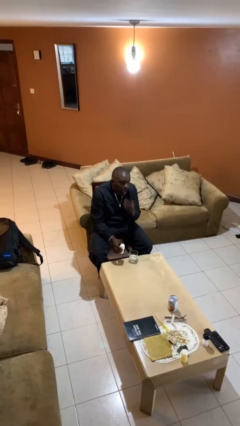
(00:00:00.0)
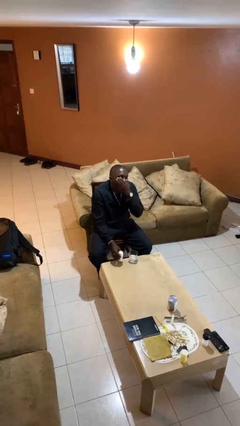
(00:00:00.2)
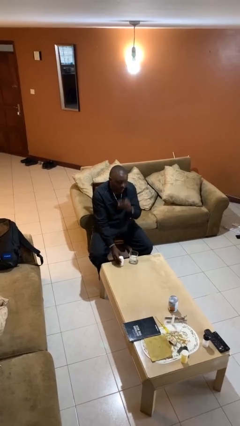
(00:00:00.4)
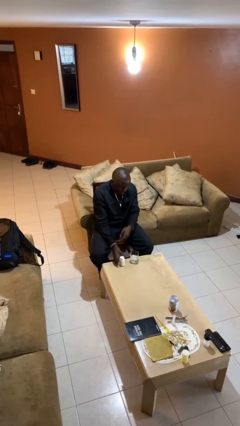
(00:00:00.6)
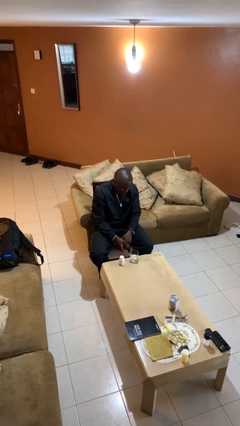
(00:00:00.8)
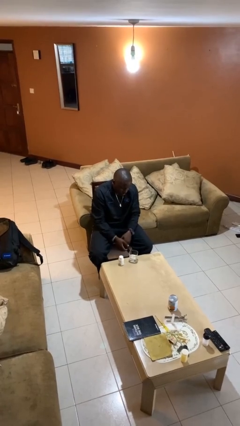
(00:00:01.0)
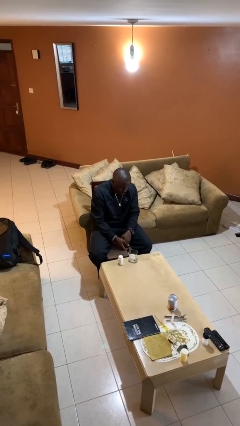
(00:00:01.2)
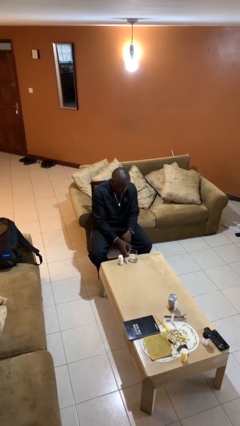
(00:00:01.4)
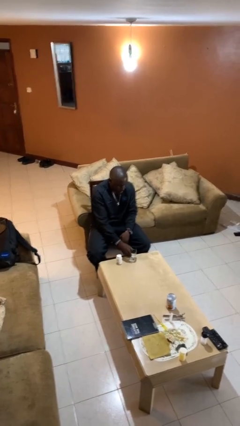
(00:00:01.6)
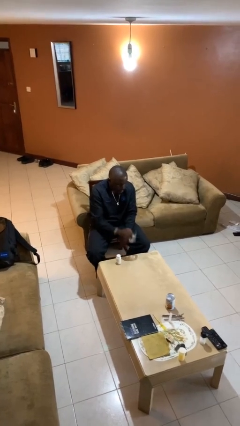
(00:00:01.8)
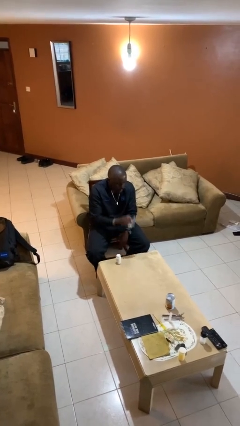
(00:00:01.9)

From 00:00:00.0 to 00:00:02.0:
person takes medicine pills

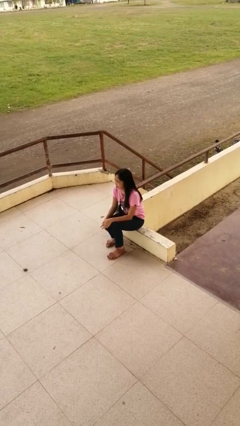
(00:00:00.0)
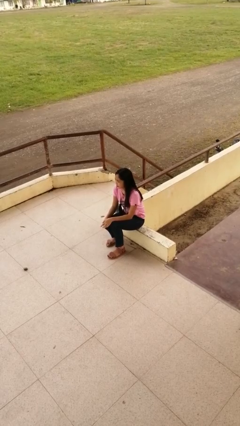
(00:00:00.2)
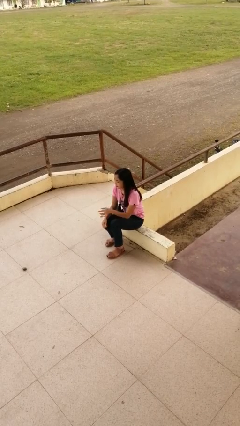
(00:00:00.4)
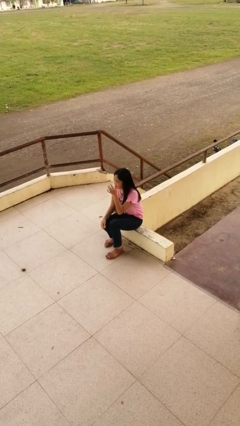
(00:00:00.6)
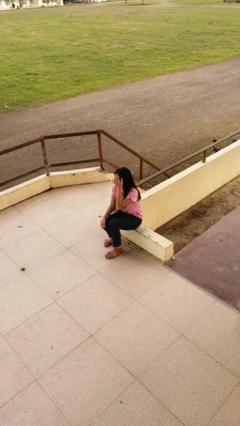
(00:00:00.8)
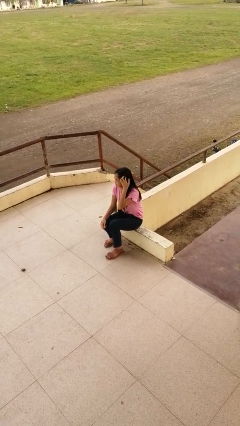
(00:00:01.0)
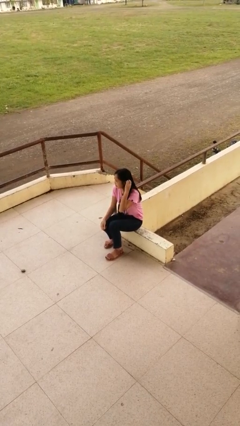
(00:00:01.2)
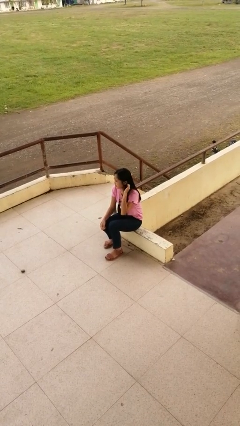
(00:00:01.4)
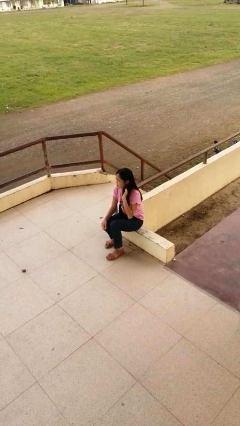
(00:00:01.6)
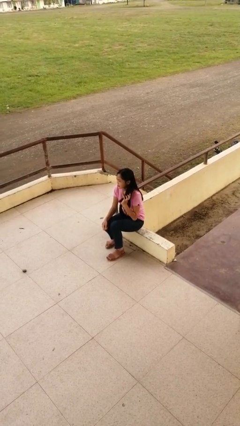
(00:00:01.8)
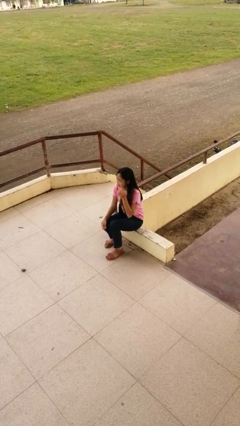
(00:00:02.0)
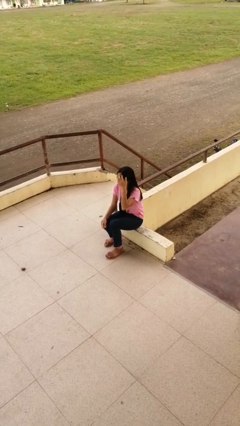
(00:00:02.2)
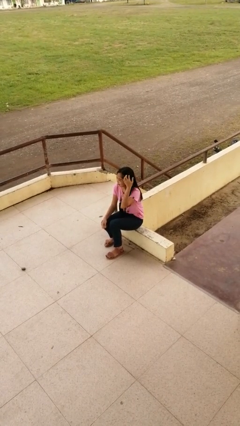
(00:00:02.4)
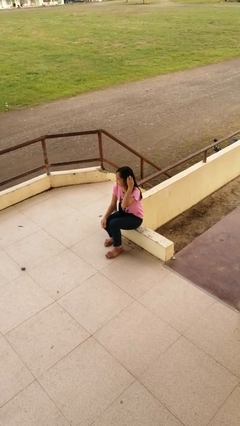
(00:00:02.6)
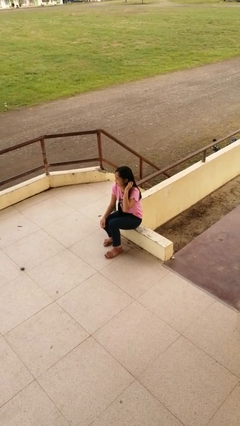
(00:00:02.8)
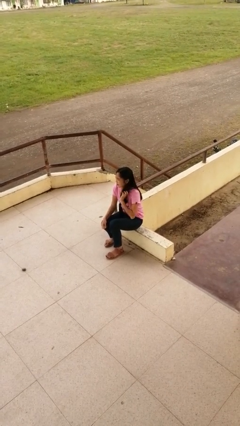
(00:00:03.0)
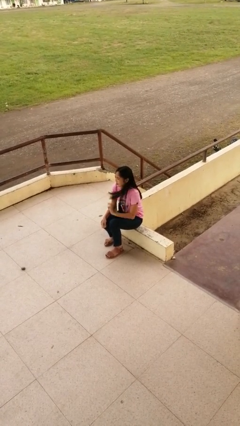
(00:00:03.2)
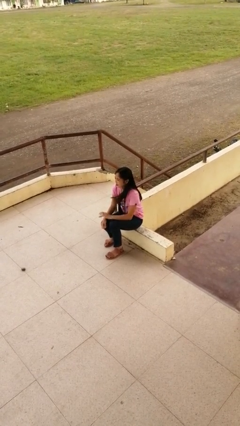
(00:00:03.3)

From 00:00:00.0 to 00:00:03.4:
person strokes hair

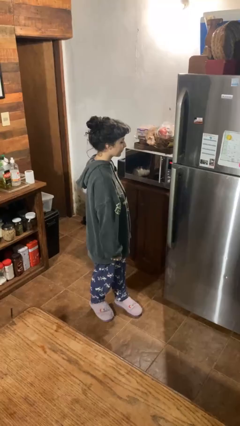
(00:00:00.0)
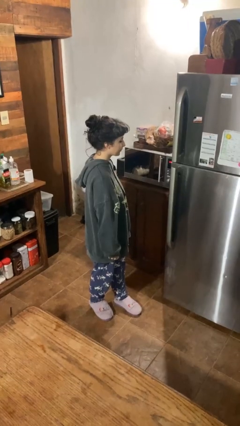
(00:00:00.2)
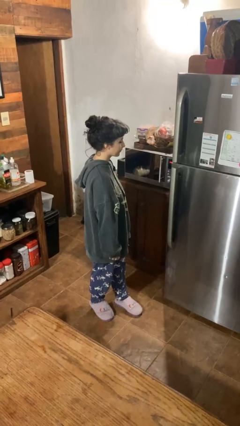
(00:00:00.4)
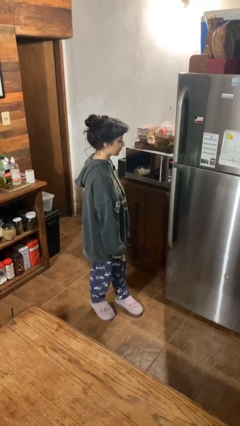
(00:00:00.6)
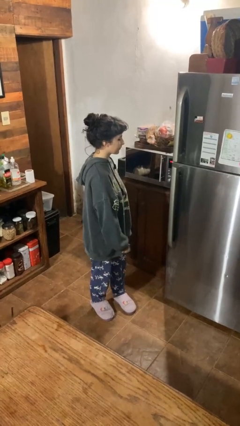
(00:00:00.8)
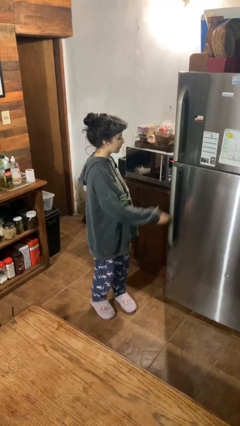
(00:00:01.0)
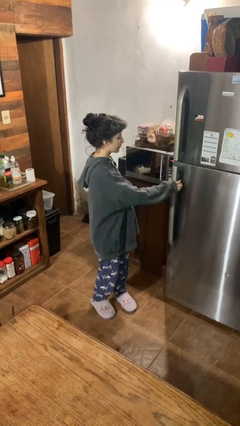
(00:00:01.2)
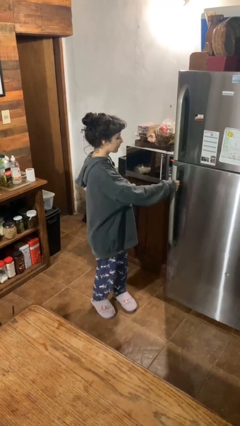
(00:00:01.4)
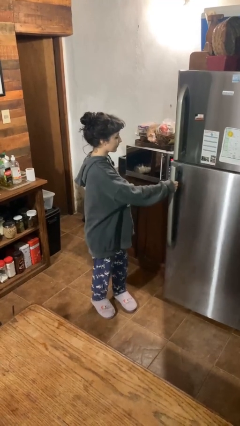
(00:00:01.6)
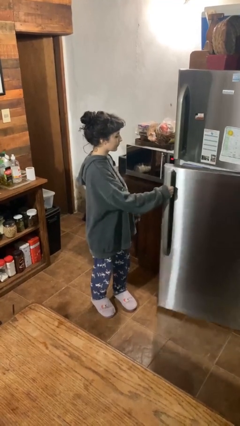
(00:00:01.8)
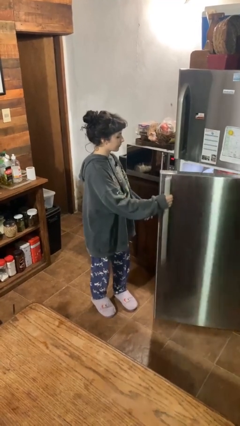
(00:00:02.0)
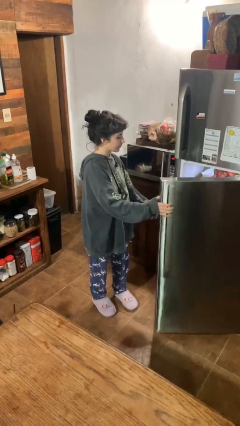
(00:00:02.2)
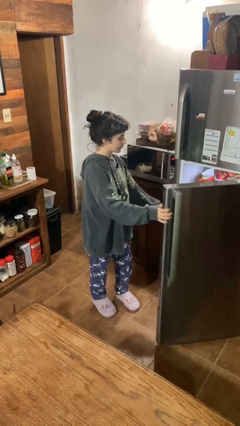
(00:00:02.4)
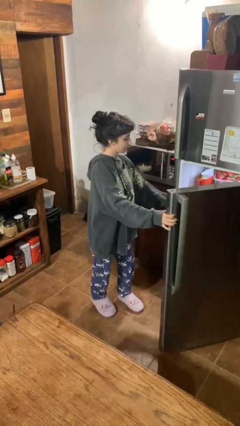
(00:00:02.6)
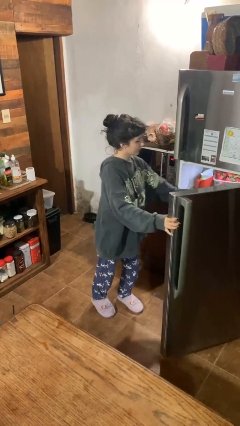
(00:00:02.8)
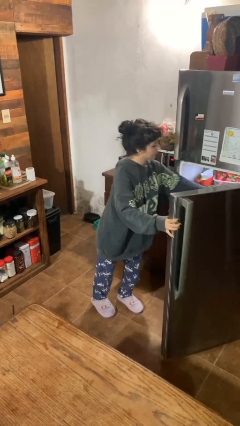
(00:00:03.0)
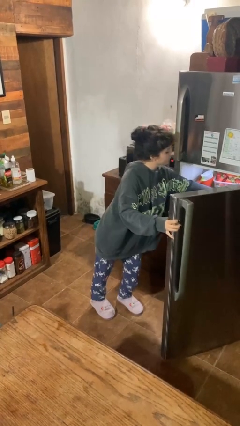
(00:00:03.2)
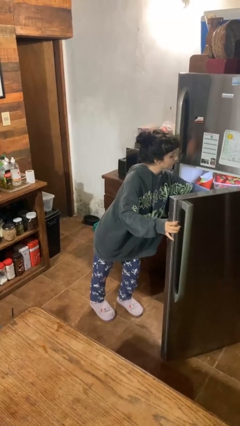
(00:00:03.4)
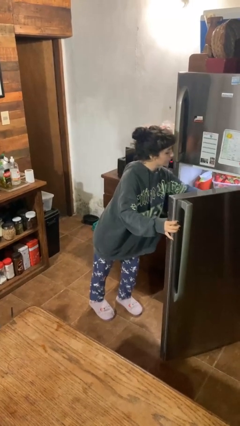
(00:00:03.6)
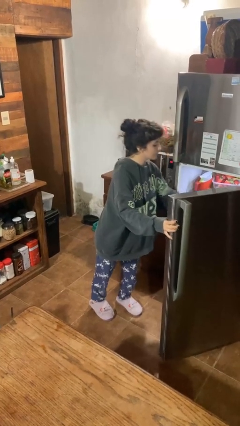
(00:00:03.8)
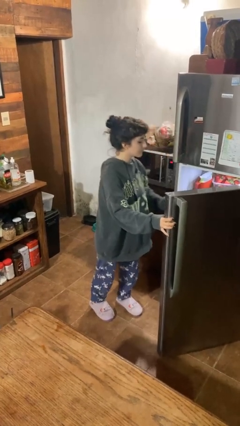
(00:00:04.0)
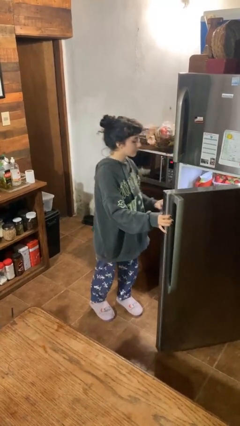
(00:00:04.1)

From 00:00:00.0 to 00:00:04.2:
person takes object from refrigerator

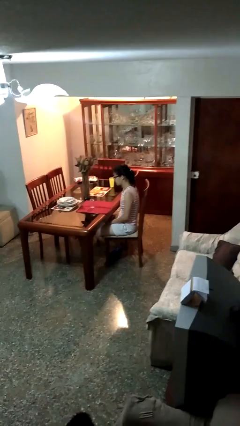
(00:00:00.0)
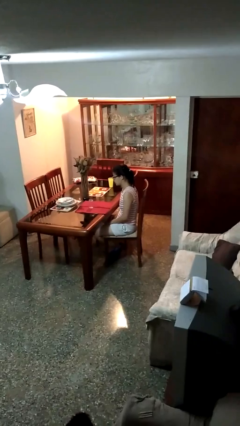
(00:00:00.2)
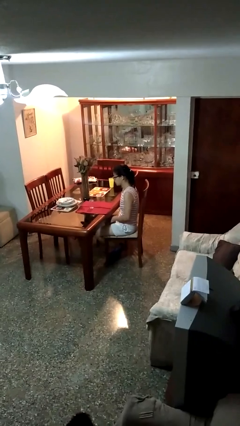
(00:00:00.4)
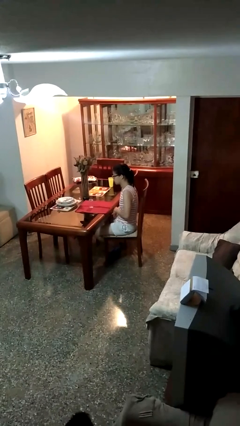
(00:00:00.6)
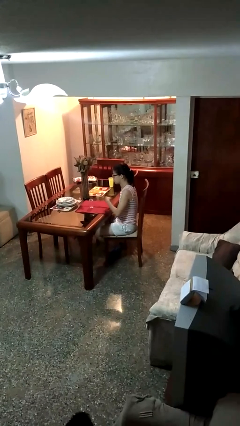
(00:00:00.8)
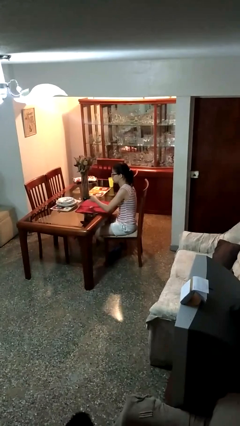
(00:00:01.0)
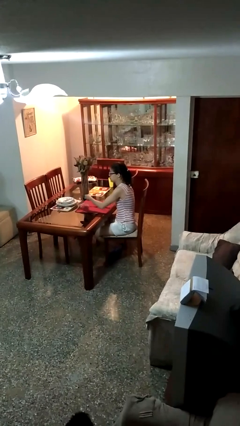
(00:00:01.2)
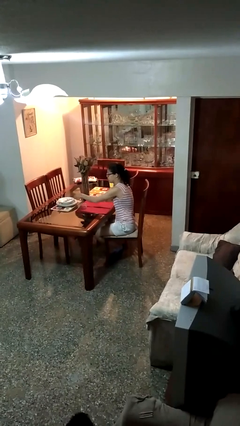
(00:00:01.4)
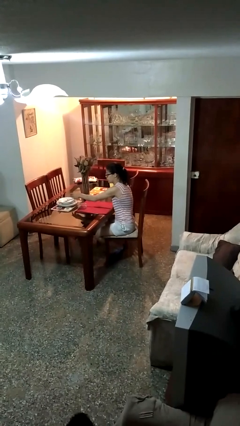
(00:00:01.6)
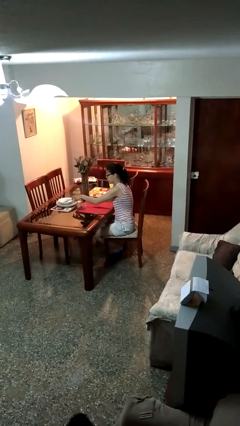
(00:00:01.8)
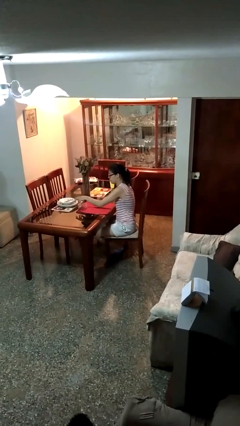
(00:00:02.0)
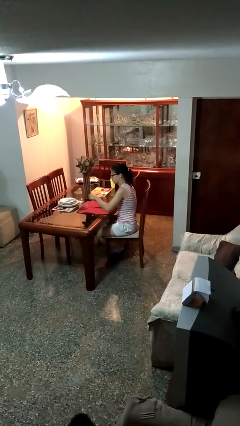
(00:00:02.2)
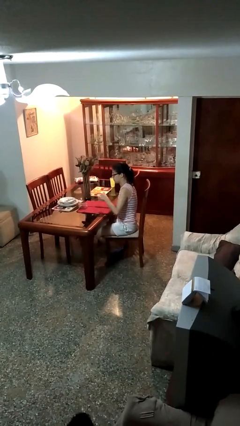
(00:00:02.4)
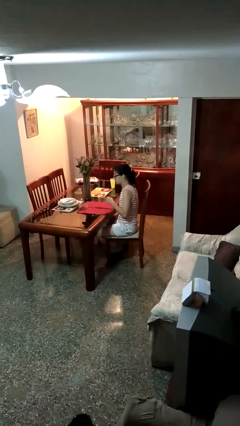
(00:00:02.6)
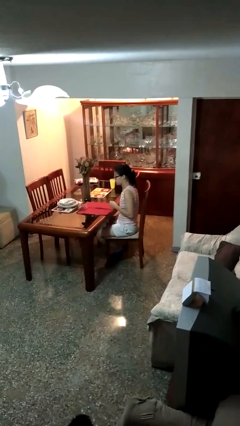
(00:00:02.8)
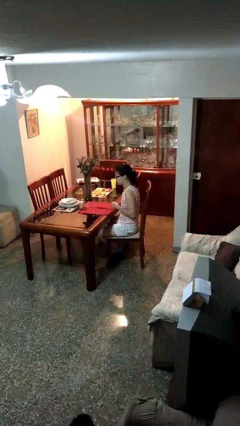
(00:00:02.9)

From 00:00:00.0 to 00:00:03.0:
person knocks over glass

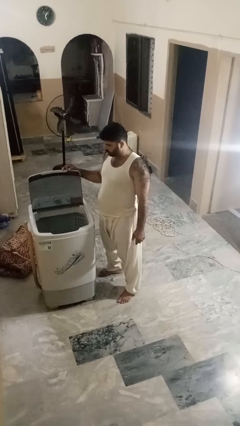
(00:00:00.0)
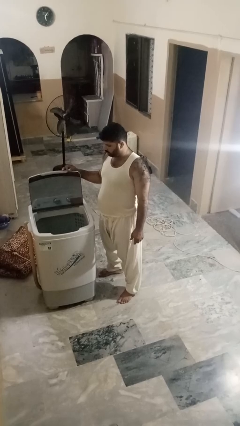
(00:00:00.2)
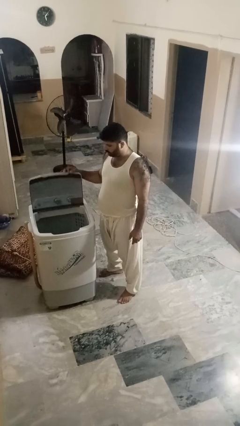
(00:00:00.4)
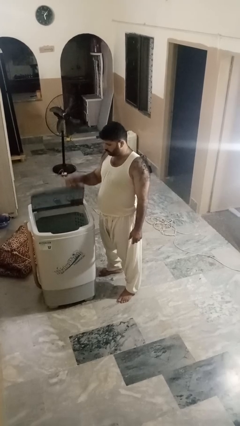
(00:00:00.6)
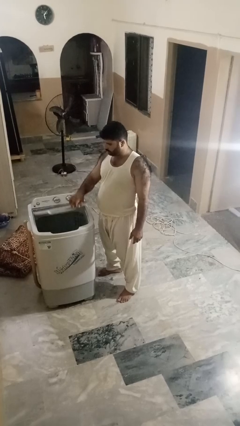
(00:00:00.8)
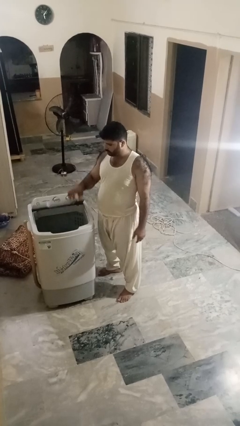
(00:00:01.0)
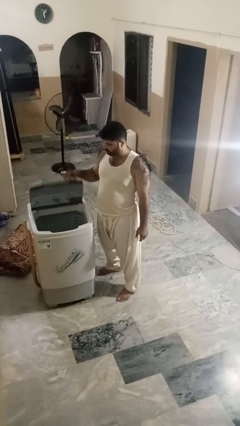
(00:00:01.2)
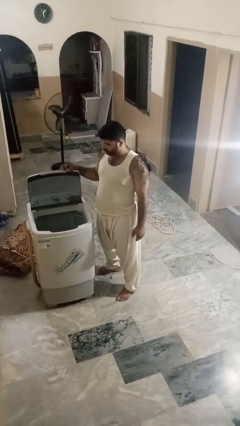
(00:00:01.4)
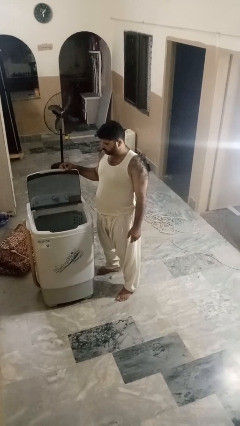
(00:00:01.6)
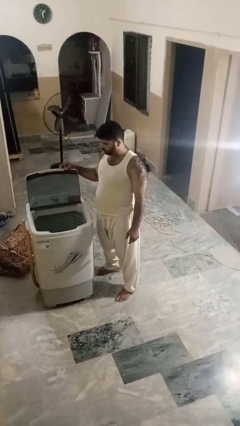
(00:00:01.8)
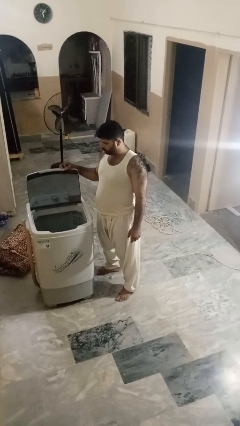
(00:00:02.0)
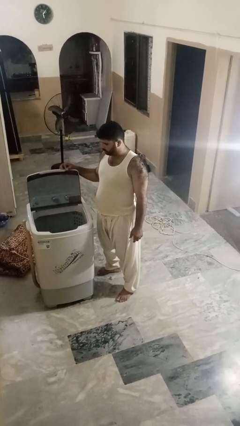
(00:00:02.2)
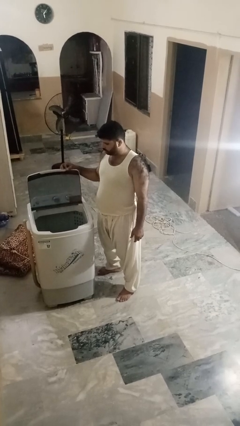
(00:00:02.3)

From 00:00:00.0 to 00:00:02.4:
person opens clothes washer

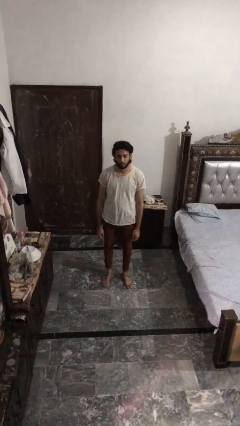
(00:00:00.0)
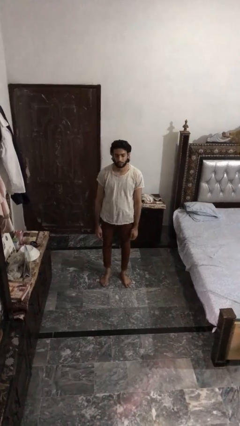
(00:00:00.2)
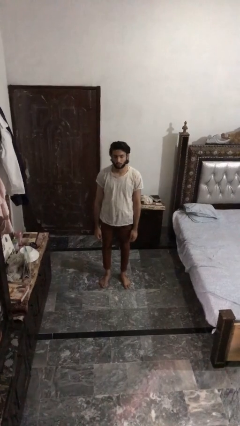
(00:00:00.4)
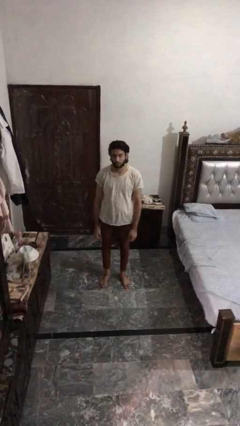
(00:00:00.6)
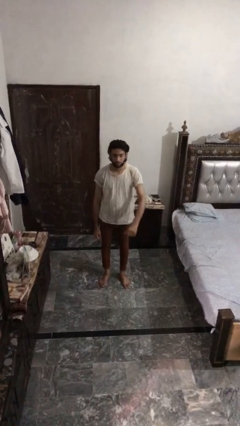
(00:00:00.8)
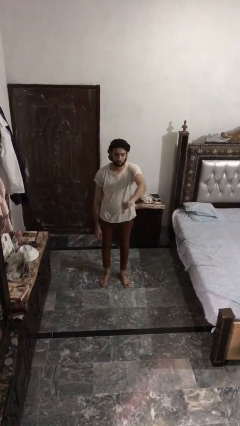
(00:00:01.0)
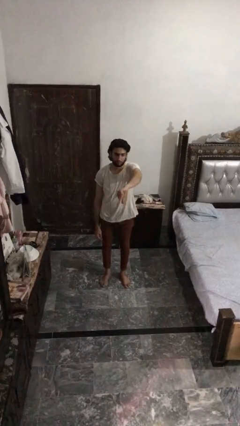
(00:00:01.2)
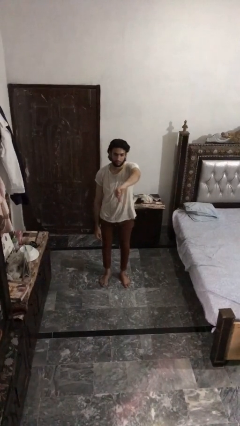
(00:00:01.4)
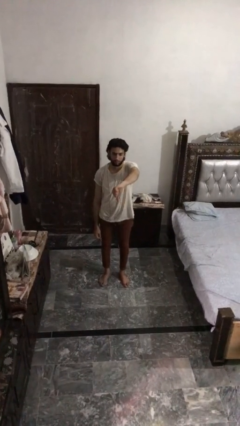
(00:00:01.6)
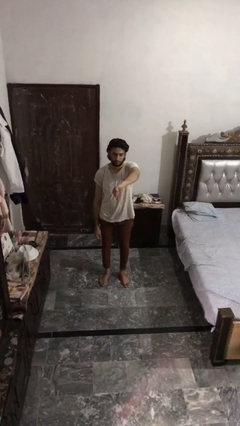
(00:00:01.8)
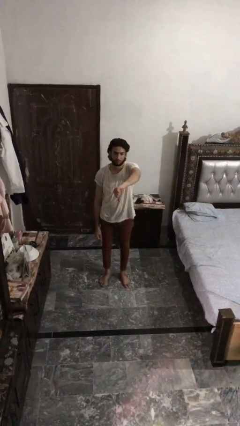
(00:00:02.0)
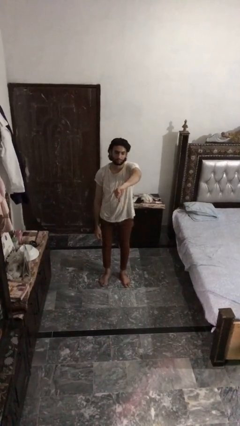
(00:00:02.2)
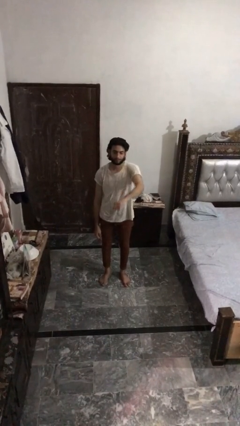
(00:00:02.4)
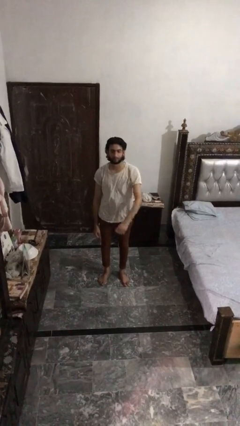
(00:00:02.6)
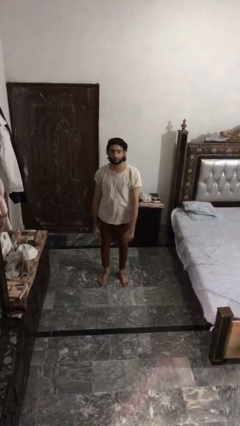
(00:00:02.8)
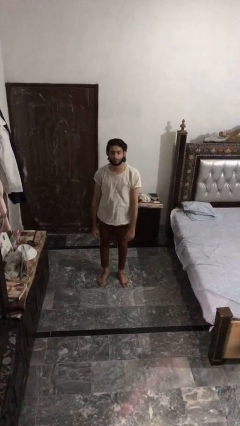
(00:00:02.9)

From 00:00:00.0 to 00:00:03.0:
person gestures thumbs down
